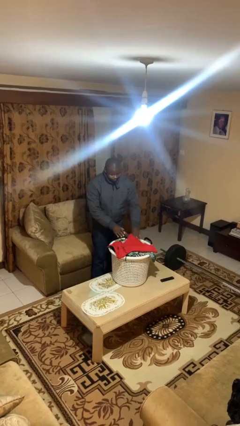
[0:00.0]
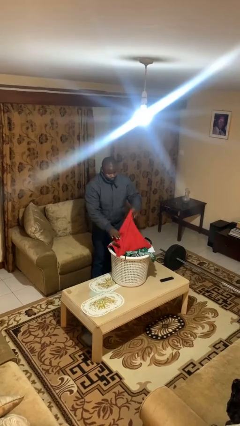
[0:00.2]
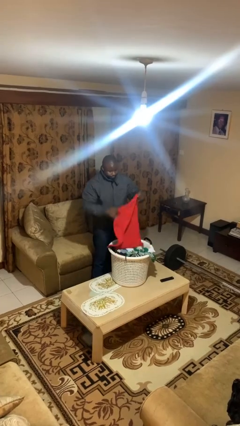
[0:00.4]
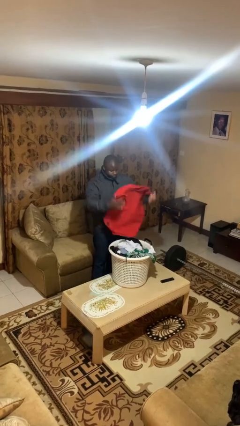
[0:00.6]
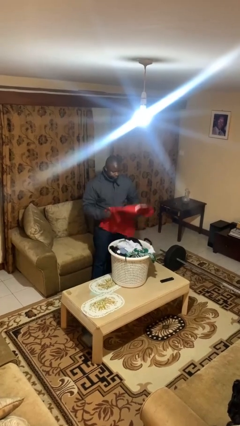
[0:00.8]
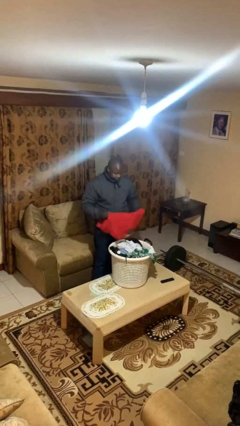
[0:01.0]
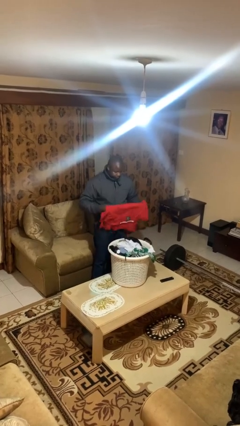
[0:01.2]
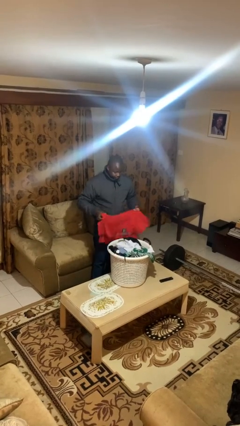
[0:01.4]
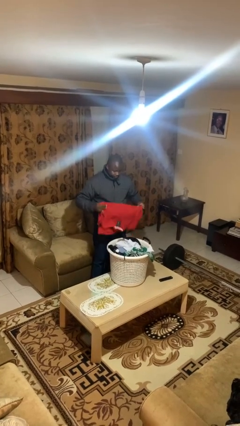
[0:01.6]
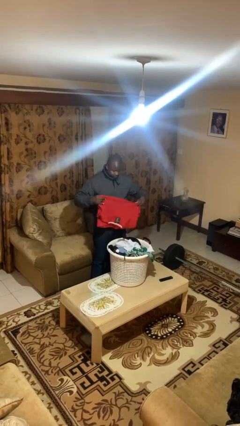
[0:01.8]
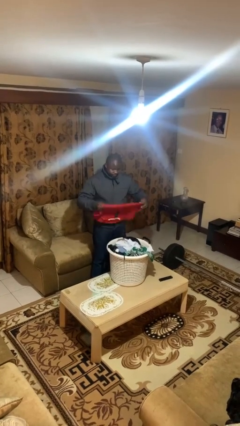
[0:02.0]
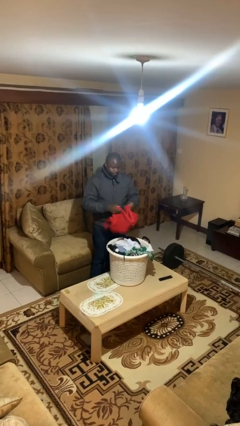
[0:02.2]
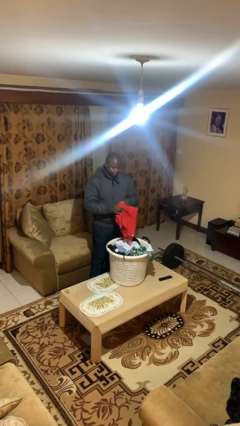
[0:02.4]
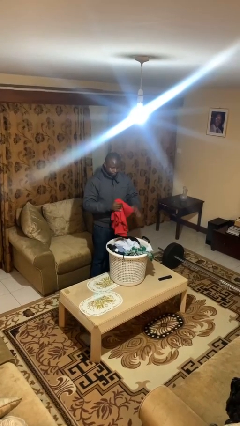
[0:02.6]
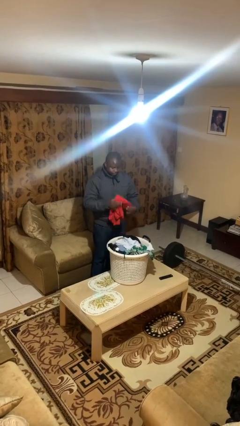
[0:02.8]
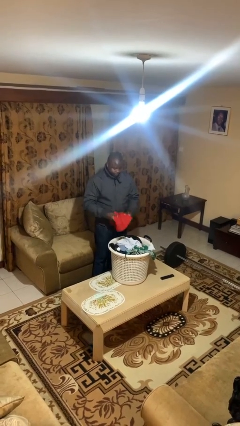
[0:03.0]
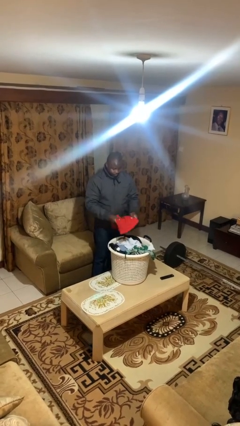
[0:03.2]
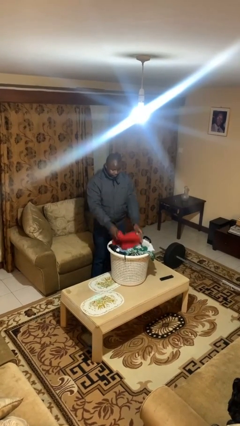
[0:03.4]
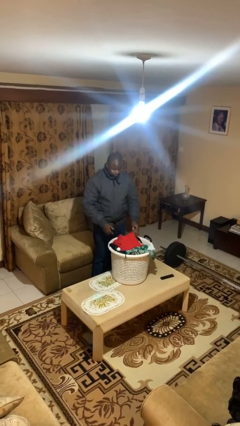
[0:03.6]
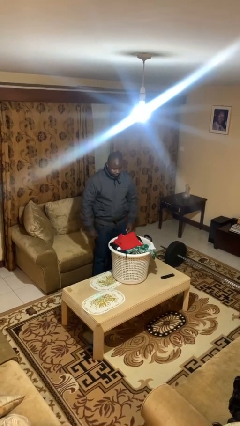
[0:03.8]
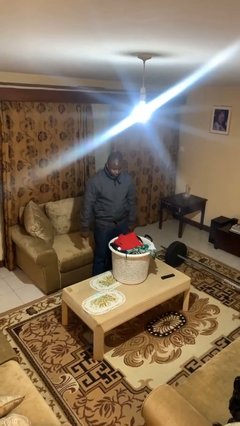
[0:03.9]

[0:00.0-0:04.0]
person folds shirt

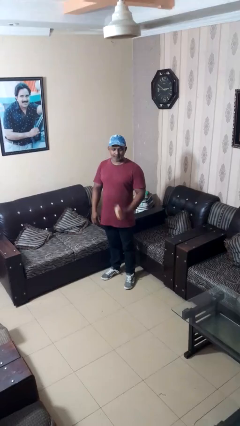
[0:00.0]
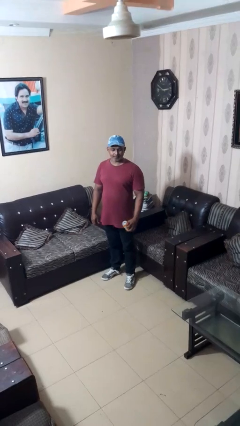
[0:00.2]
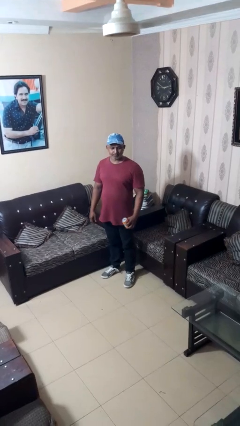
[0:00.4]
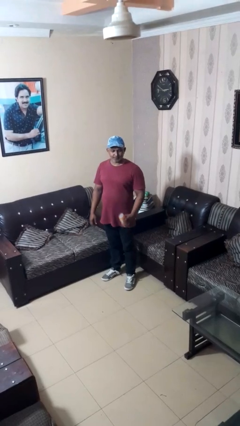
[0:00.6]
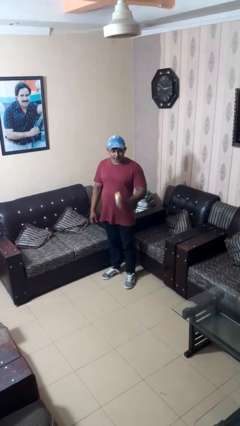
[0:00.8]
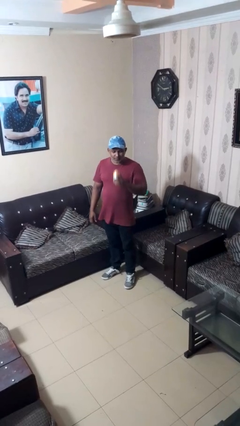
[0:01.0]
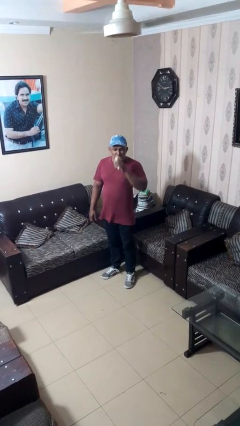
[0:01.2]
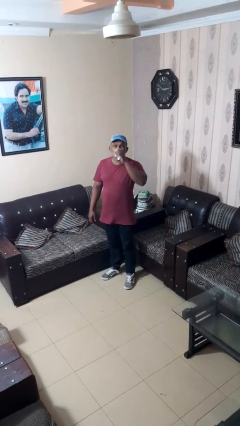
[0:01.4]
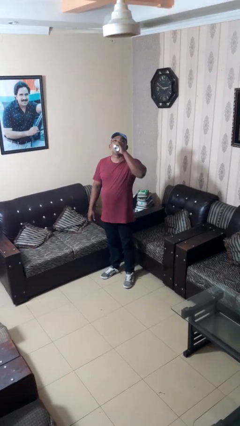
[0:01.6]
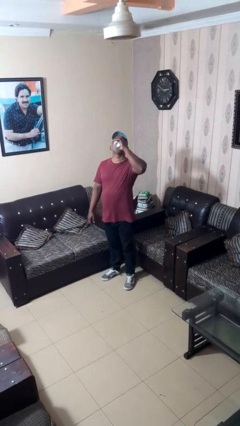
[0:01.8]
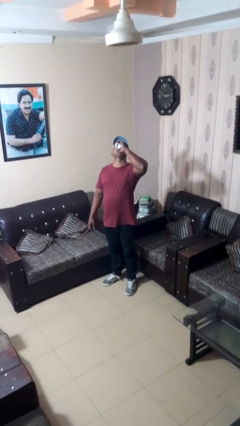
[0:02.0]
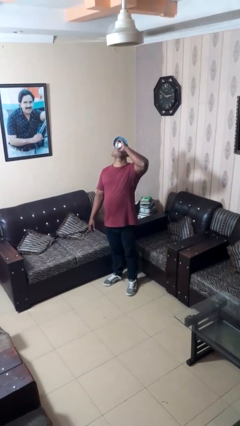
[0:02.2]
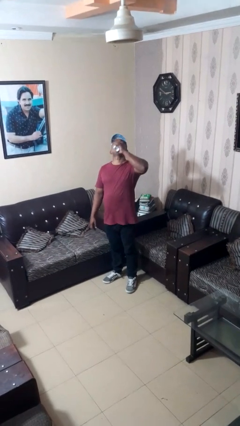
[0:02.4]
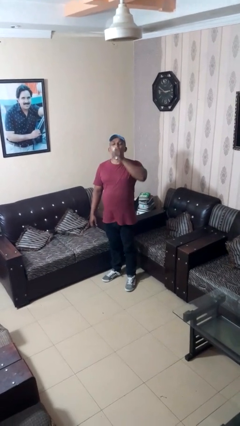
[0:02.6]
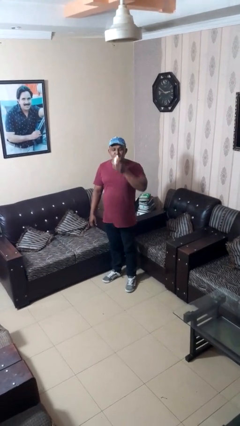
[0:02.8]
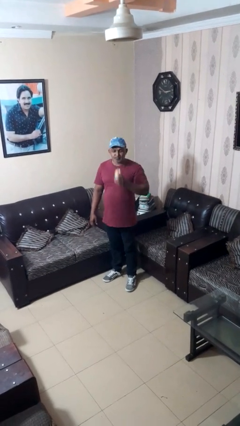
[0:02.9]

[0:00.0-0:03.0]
person drinks from beverage can

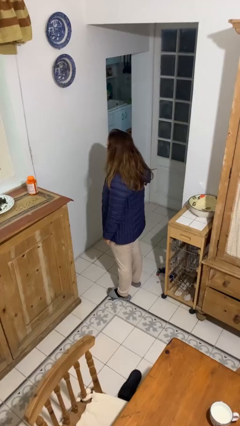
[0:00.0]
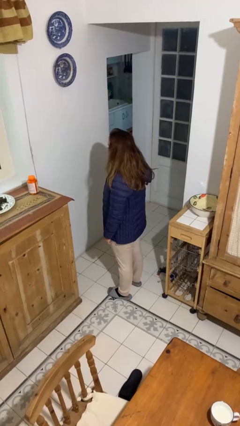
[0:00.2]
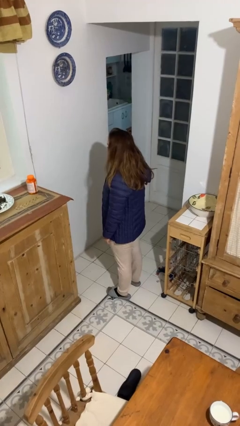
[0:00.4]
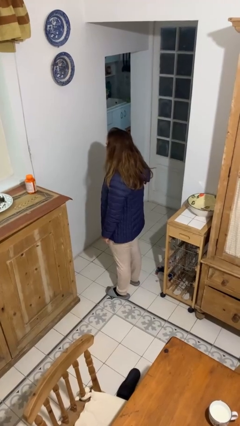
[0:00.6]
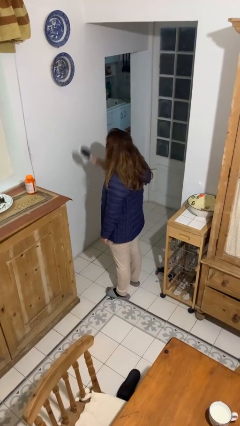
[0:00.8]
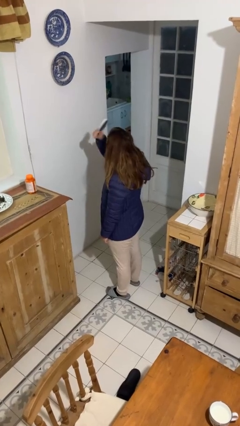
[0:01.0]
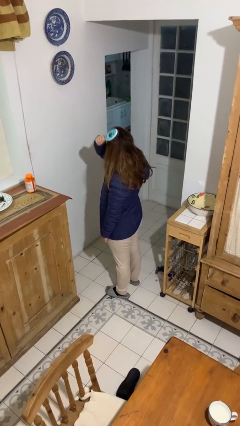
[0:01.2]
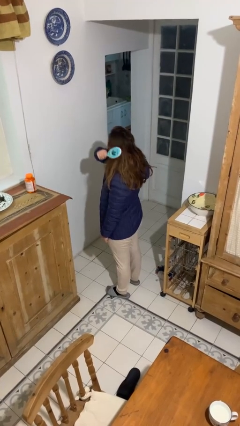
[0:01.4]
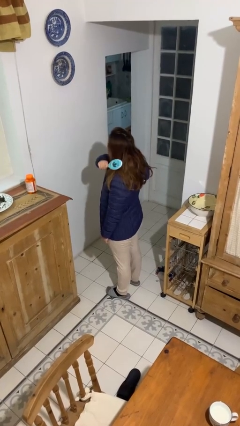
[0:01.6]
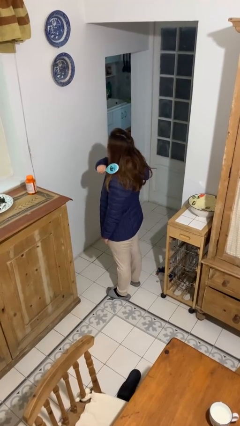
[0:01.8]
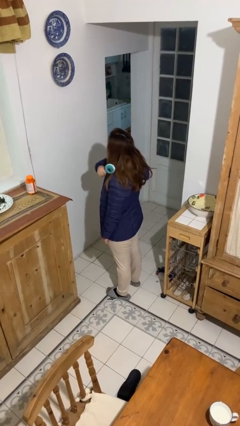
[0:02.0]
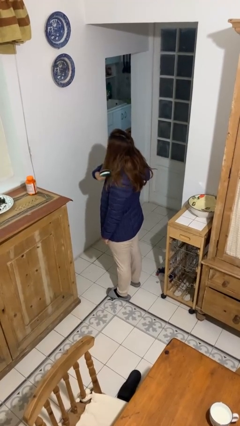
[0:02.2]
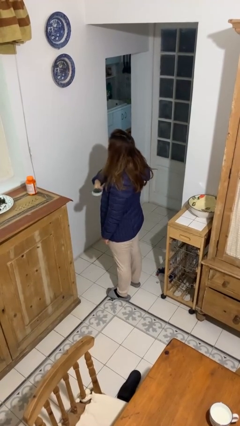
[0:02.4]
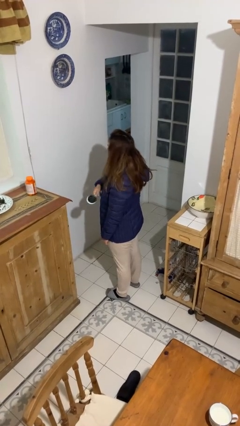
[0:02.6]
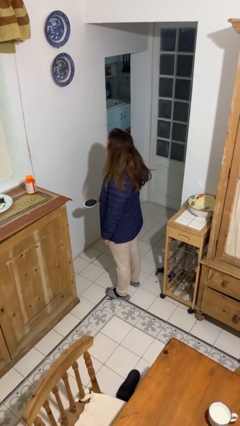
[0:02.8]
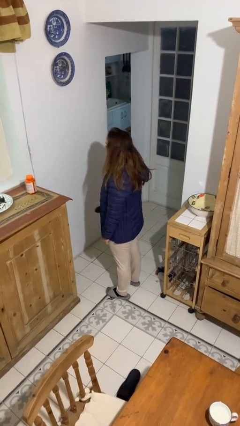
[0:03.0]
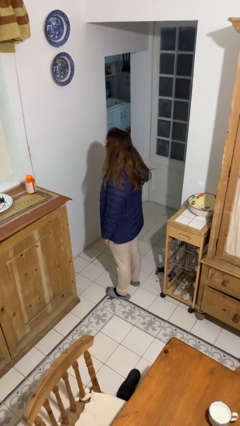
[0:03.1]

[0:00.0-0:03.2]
person brushes hair

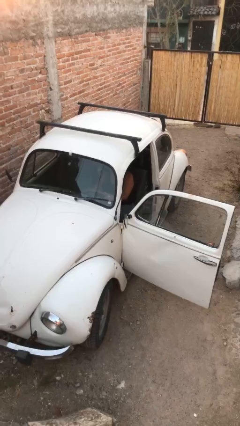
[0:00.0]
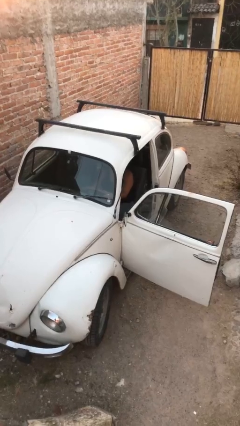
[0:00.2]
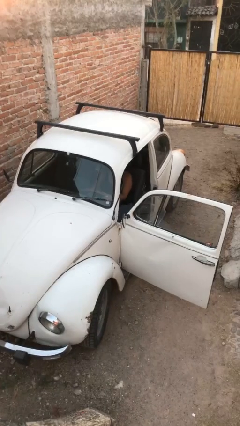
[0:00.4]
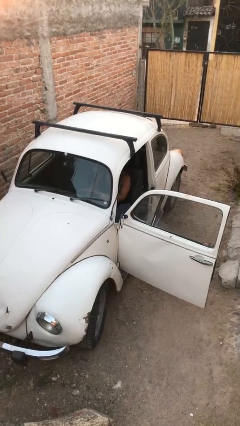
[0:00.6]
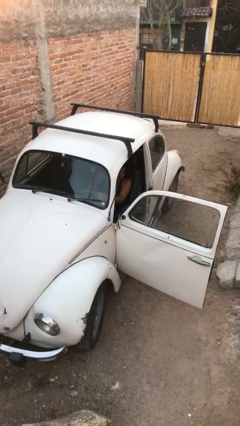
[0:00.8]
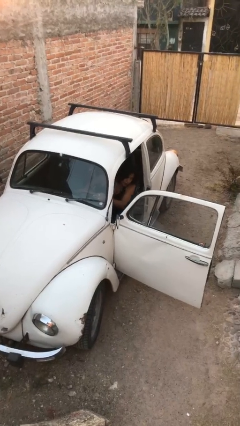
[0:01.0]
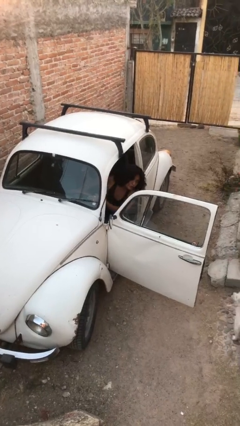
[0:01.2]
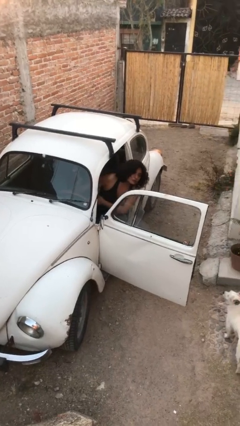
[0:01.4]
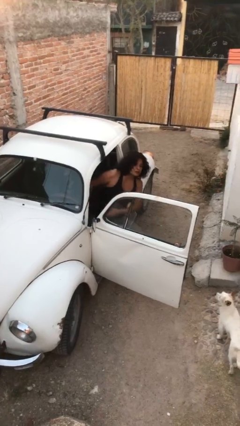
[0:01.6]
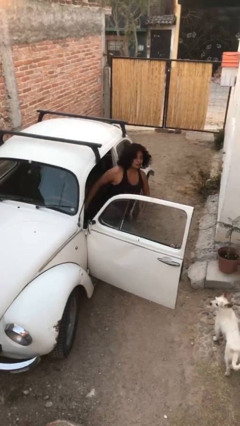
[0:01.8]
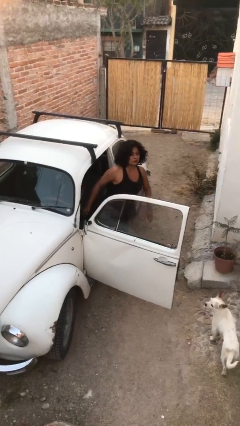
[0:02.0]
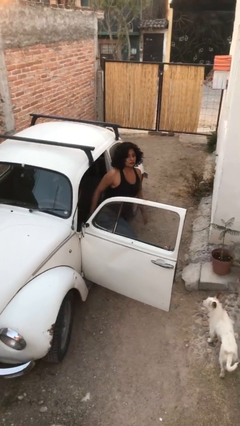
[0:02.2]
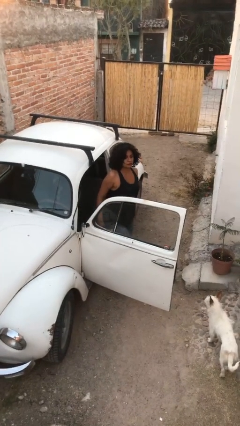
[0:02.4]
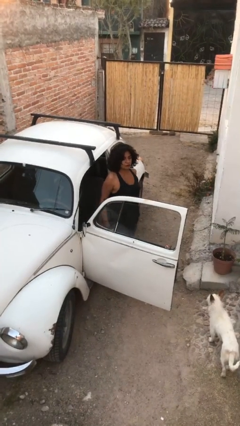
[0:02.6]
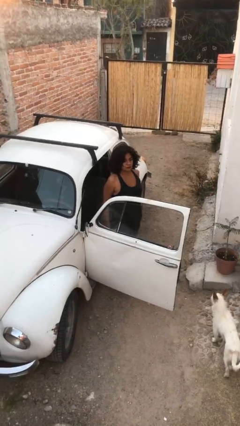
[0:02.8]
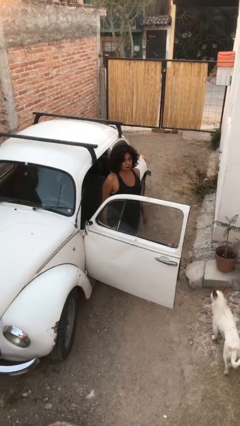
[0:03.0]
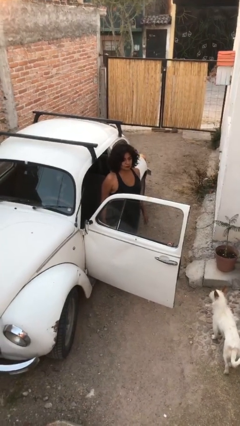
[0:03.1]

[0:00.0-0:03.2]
person exits car

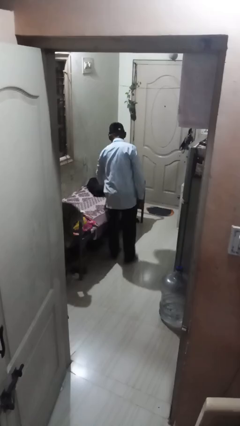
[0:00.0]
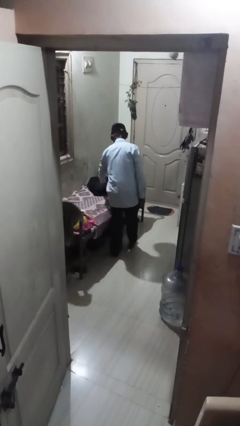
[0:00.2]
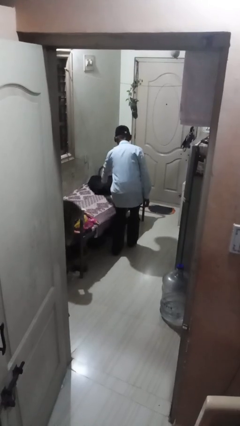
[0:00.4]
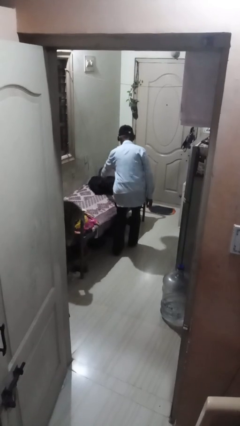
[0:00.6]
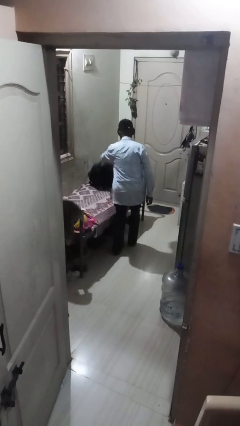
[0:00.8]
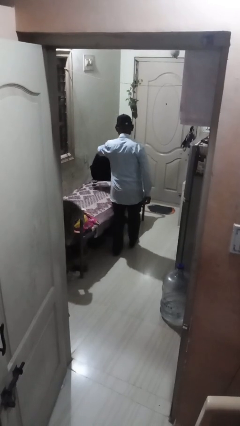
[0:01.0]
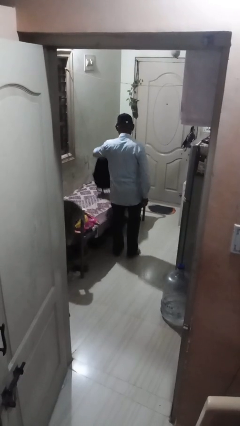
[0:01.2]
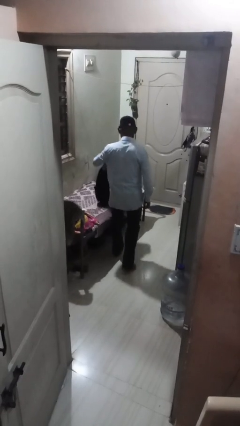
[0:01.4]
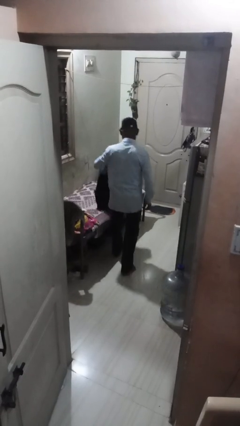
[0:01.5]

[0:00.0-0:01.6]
person picks up object from bed

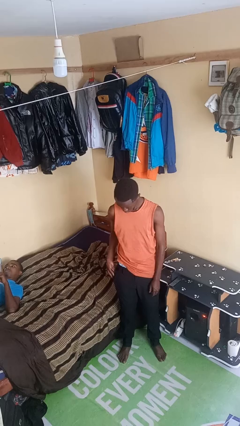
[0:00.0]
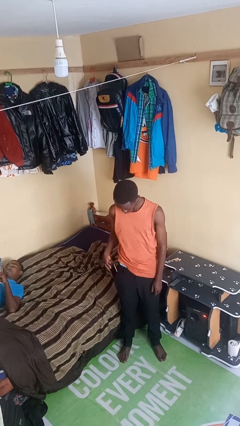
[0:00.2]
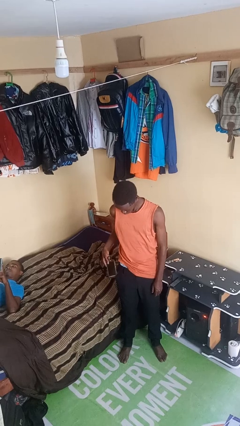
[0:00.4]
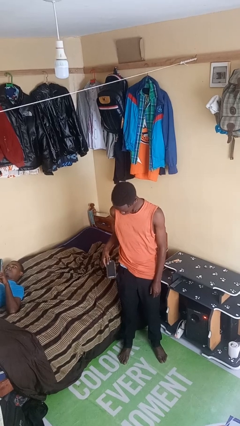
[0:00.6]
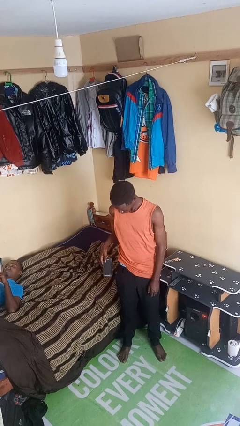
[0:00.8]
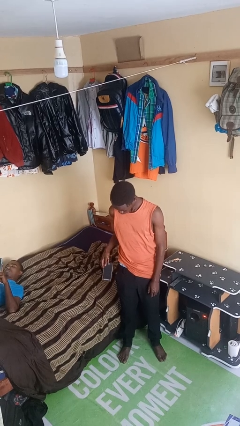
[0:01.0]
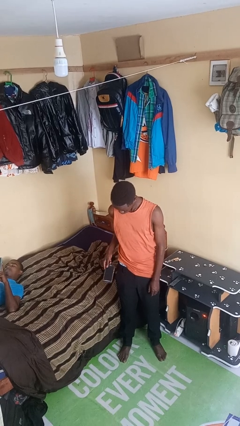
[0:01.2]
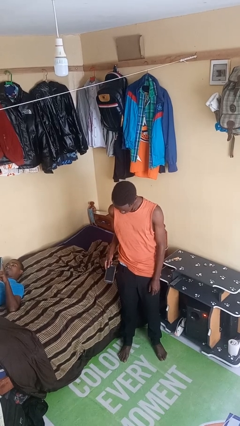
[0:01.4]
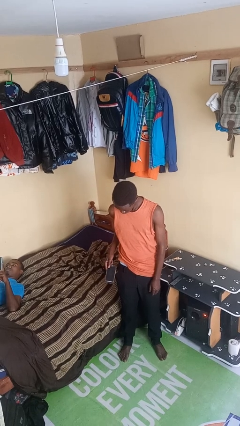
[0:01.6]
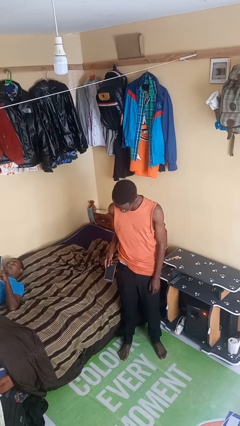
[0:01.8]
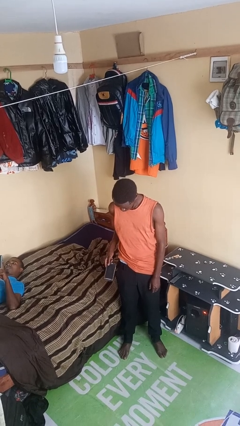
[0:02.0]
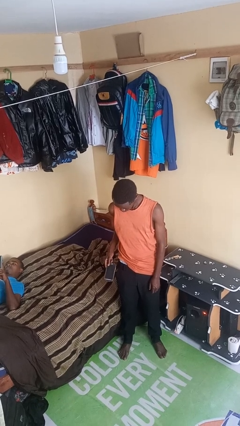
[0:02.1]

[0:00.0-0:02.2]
person takes phone from pocket

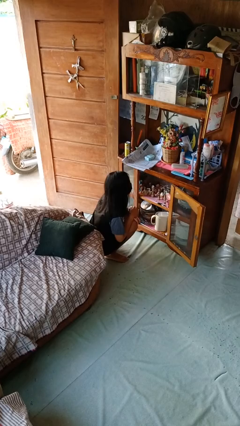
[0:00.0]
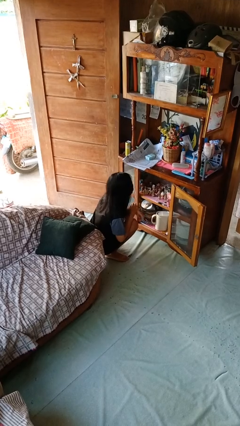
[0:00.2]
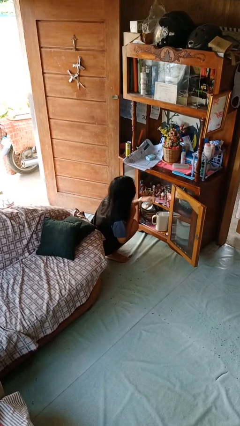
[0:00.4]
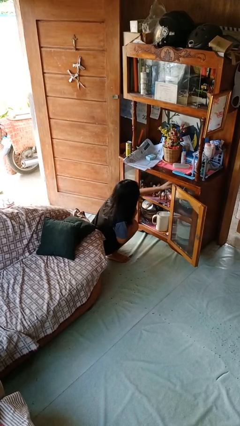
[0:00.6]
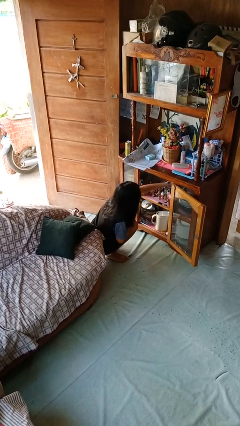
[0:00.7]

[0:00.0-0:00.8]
person searches in cabinet
